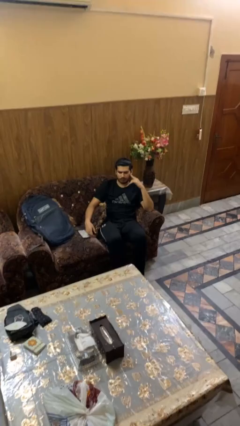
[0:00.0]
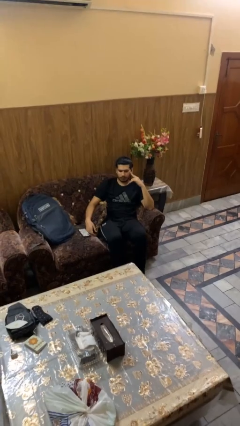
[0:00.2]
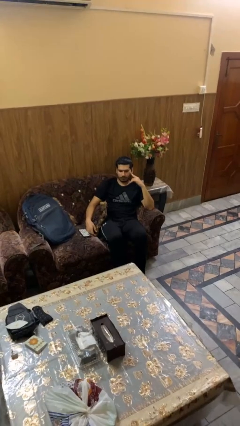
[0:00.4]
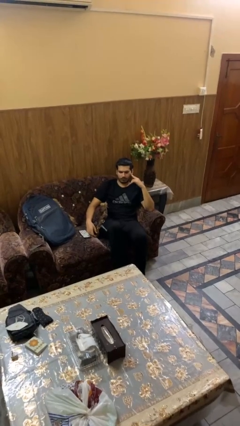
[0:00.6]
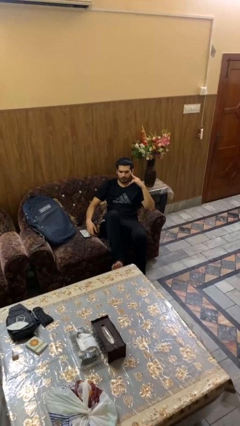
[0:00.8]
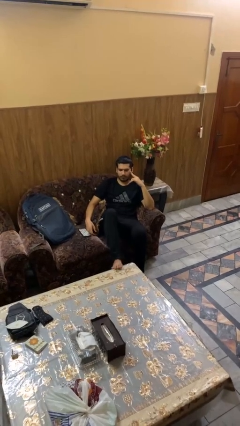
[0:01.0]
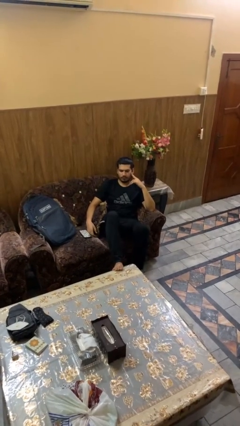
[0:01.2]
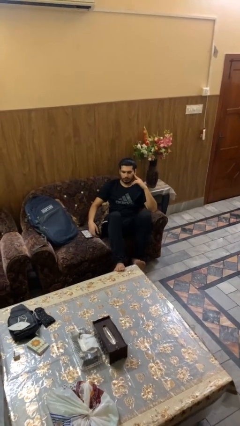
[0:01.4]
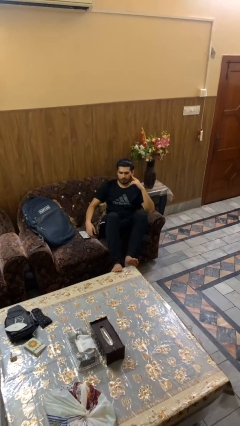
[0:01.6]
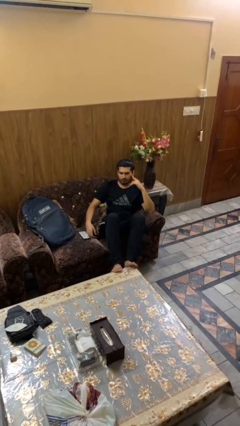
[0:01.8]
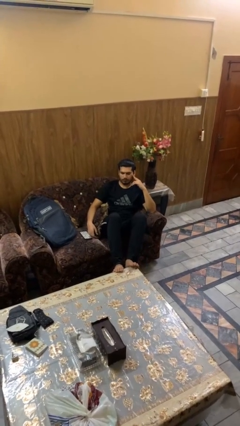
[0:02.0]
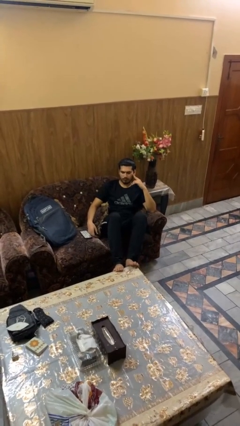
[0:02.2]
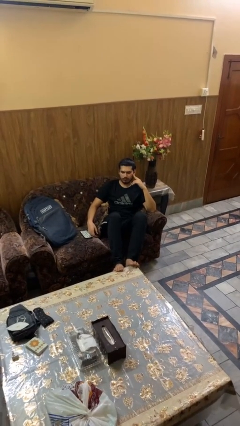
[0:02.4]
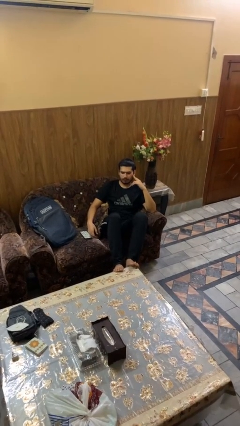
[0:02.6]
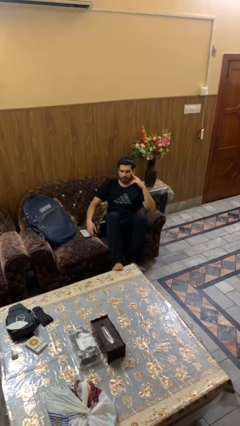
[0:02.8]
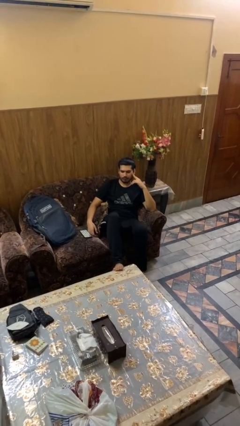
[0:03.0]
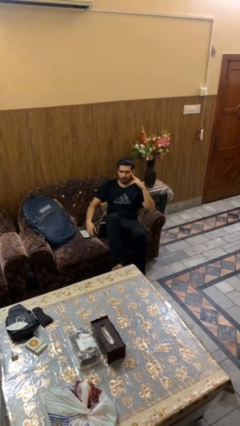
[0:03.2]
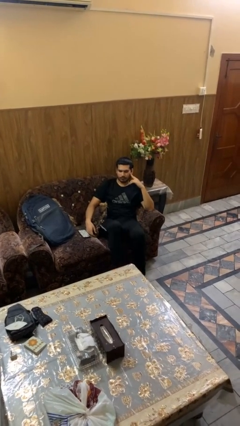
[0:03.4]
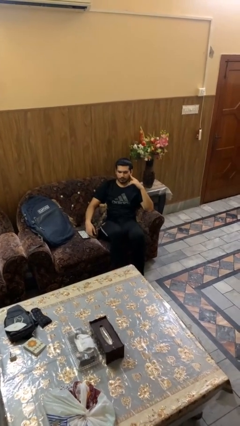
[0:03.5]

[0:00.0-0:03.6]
person puts feet up

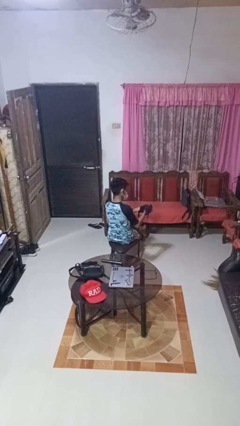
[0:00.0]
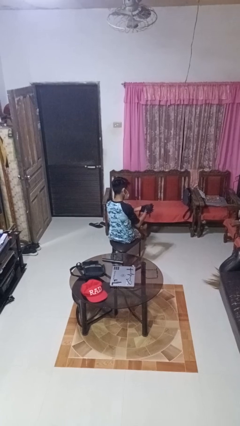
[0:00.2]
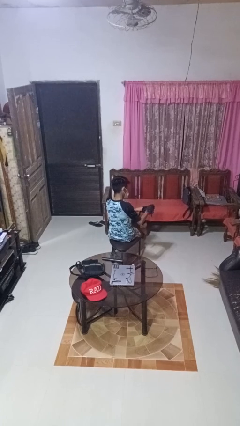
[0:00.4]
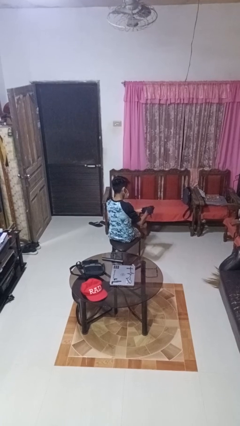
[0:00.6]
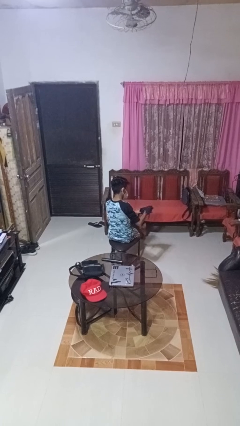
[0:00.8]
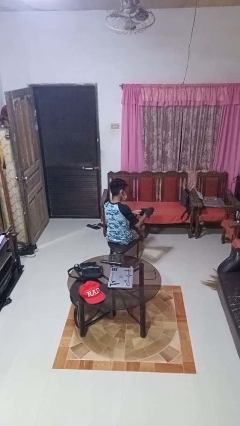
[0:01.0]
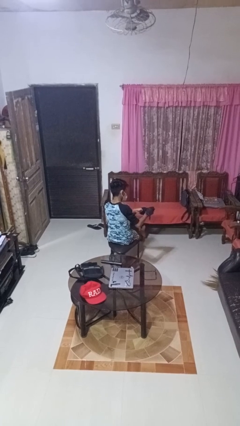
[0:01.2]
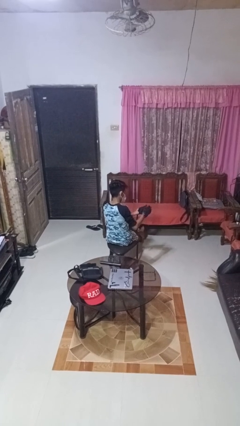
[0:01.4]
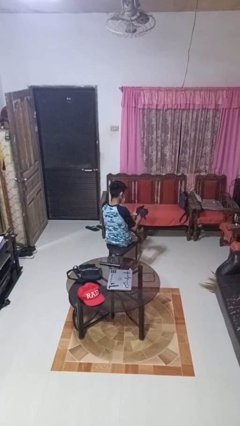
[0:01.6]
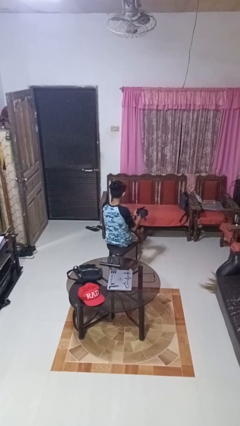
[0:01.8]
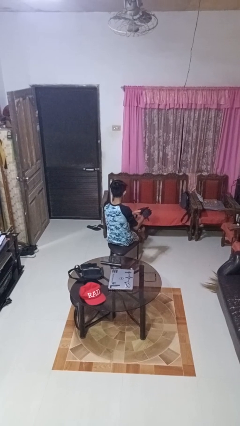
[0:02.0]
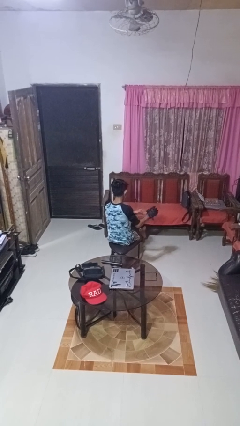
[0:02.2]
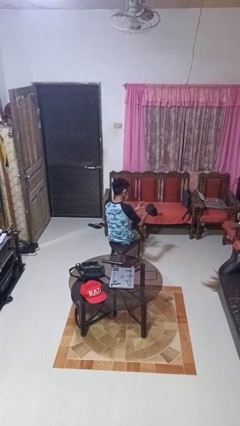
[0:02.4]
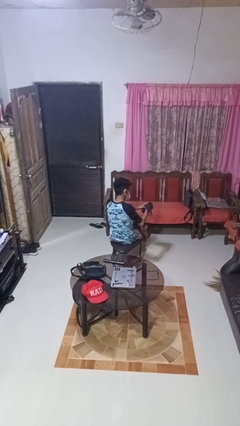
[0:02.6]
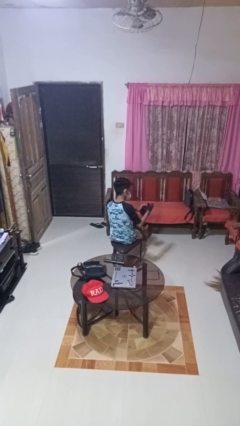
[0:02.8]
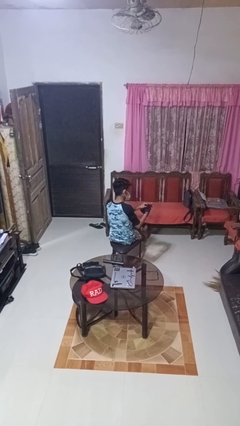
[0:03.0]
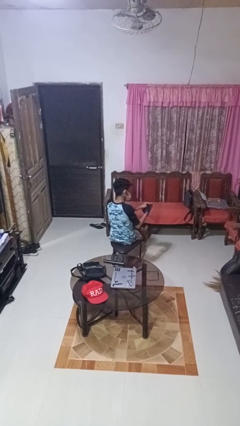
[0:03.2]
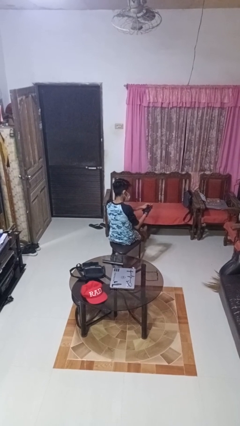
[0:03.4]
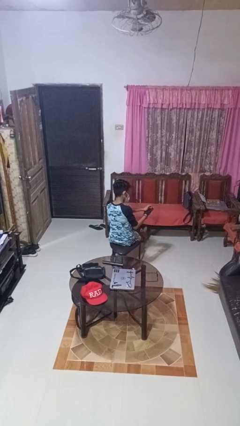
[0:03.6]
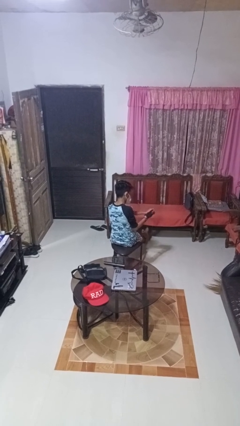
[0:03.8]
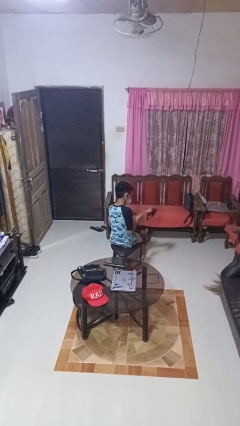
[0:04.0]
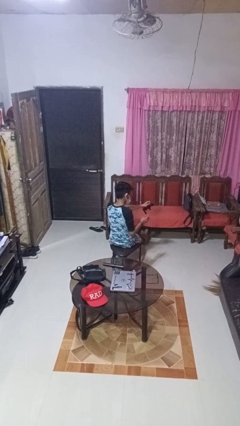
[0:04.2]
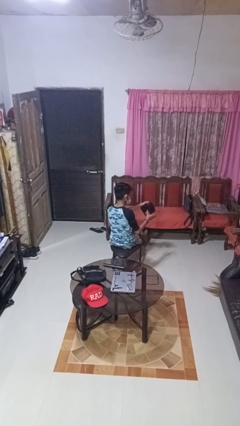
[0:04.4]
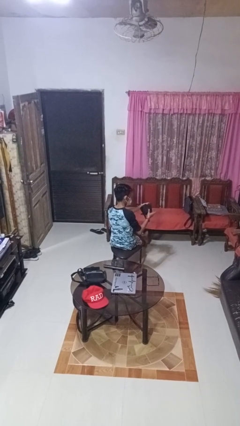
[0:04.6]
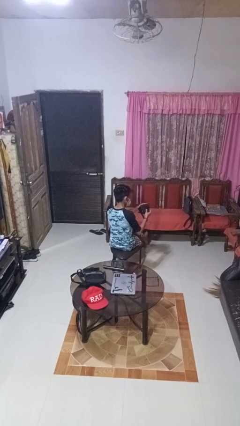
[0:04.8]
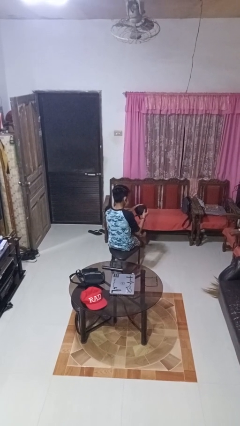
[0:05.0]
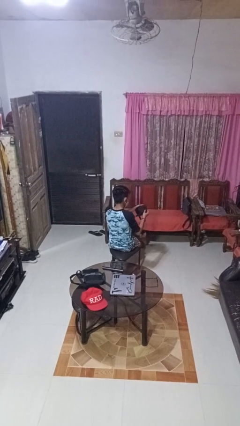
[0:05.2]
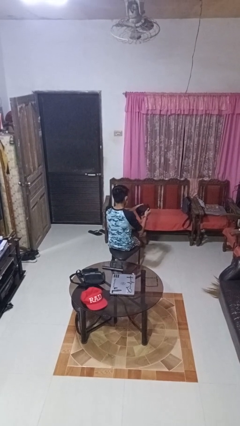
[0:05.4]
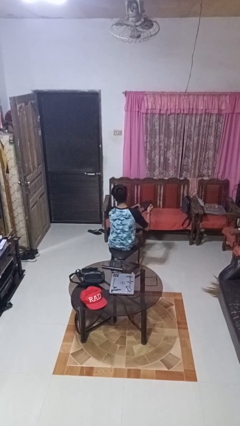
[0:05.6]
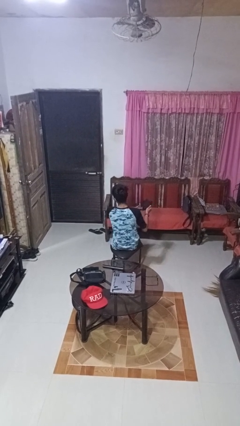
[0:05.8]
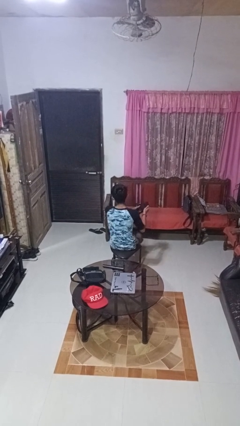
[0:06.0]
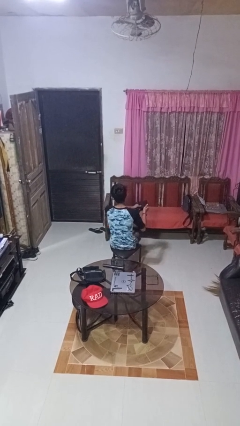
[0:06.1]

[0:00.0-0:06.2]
person takes off gloves

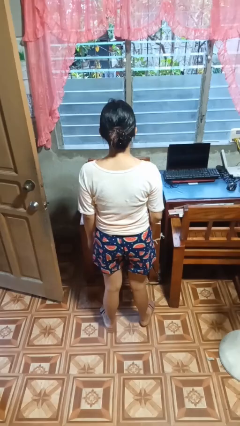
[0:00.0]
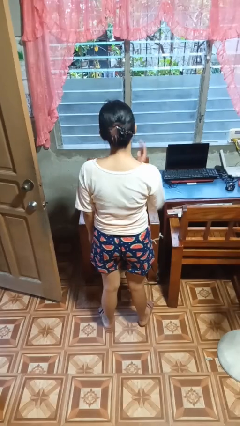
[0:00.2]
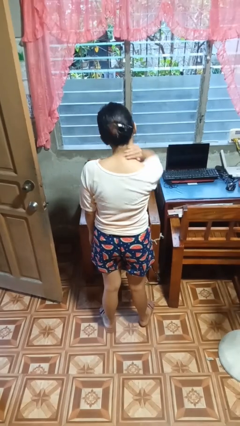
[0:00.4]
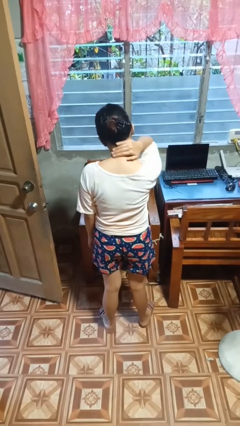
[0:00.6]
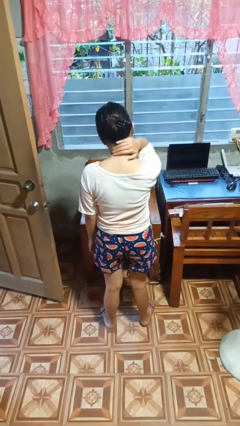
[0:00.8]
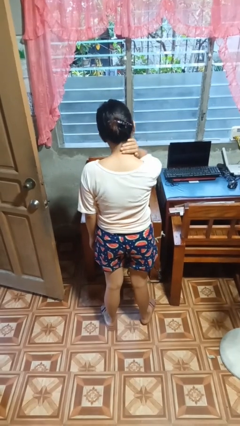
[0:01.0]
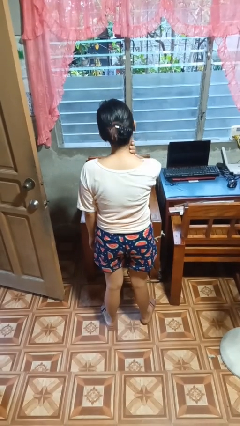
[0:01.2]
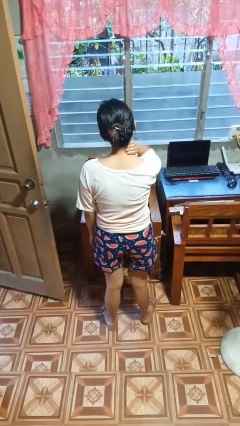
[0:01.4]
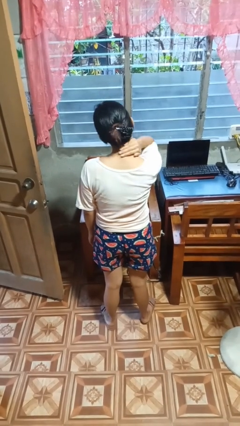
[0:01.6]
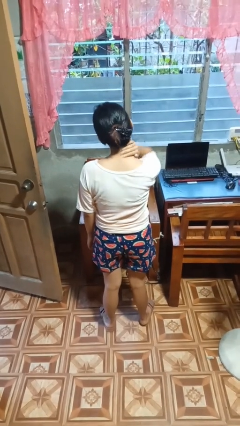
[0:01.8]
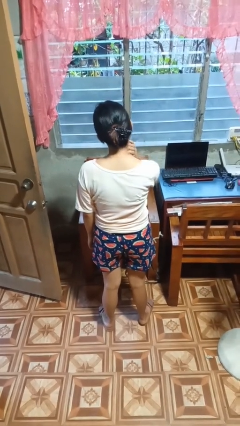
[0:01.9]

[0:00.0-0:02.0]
person rubs neck

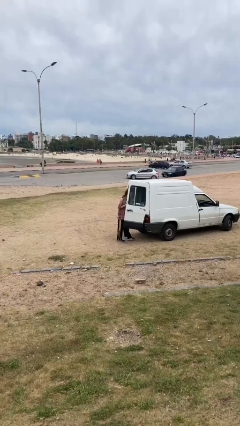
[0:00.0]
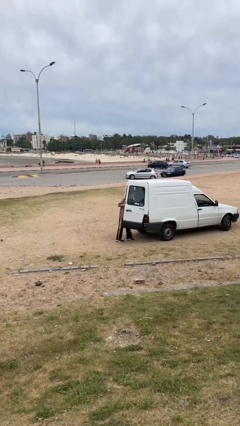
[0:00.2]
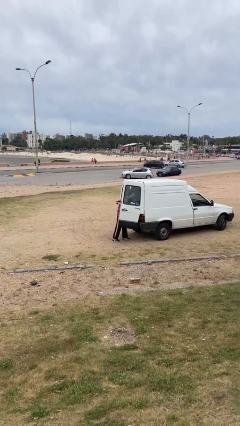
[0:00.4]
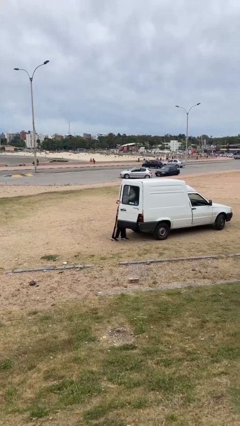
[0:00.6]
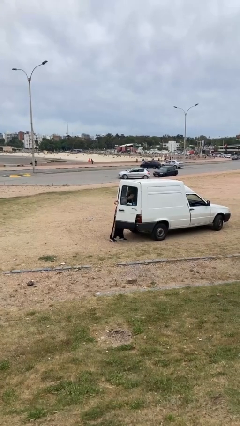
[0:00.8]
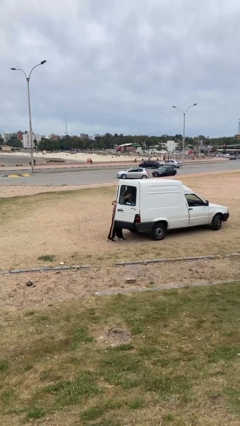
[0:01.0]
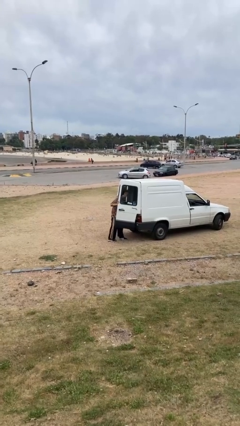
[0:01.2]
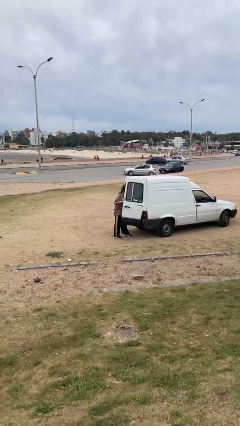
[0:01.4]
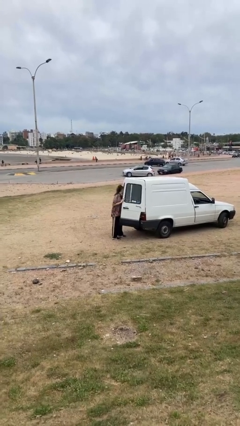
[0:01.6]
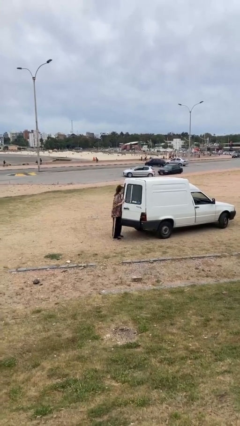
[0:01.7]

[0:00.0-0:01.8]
person loads car

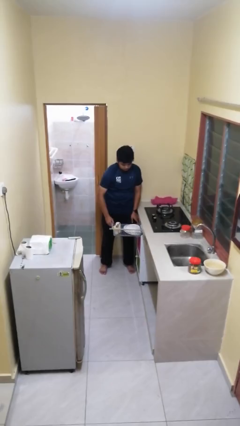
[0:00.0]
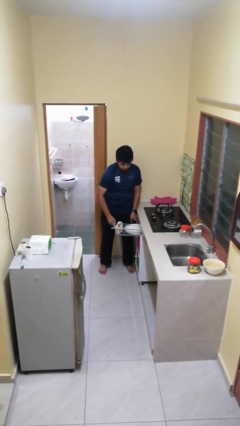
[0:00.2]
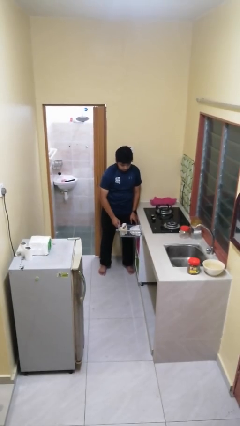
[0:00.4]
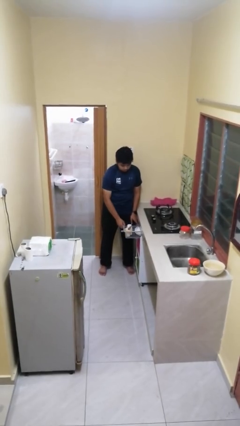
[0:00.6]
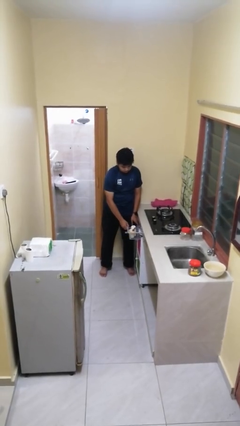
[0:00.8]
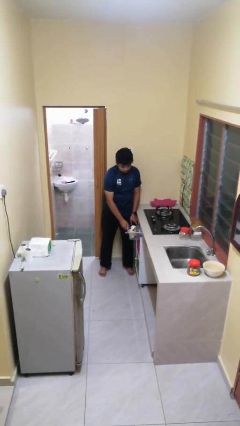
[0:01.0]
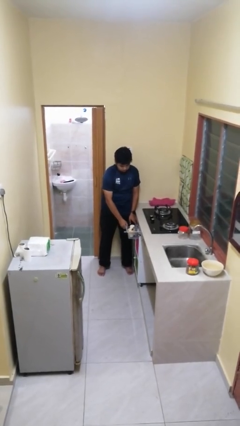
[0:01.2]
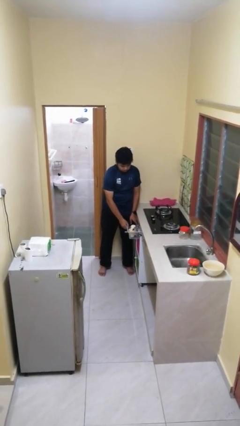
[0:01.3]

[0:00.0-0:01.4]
person closes kitchen drawer

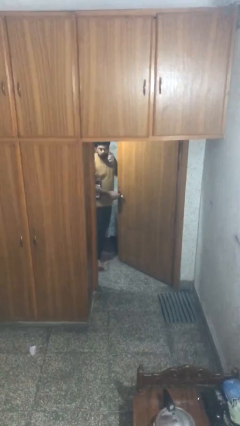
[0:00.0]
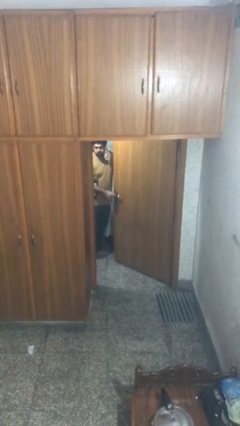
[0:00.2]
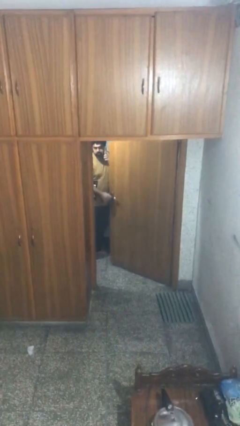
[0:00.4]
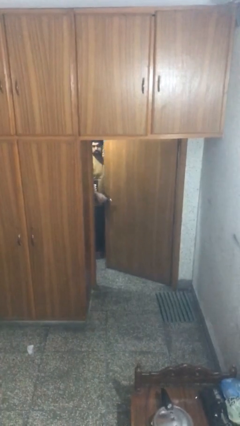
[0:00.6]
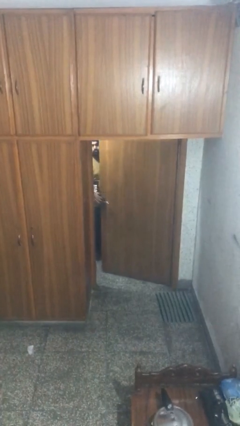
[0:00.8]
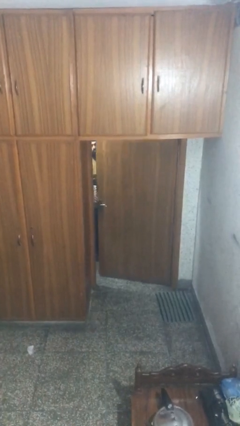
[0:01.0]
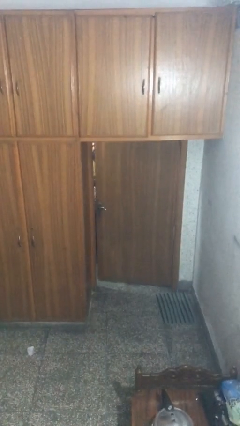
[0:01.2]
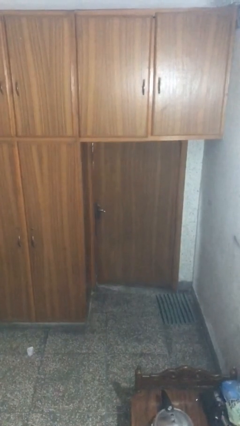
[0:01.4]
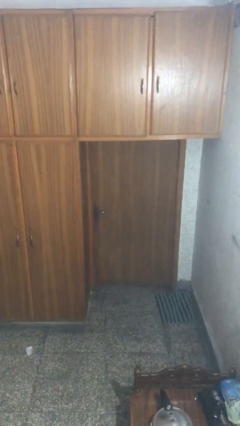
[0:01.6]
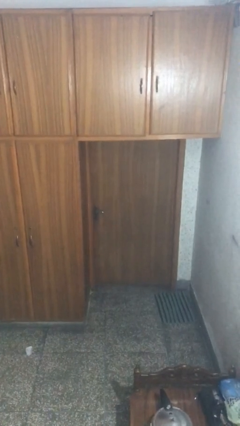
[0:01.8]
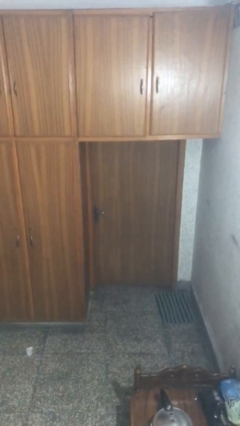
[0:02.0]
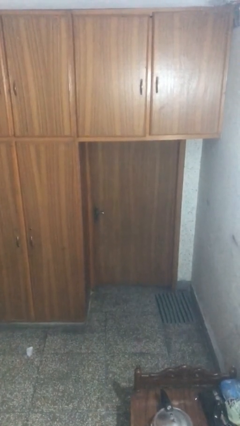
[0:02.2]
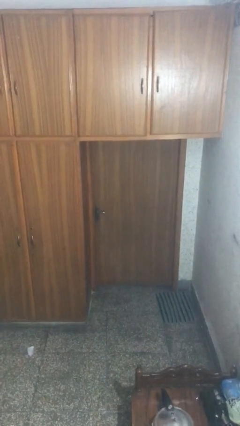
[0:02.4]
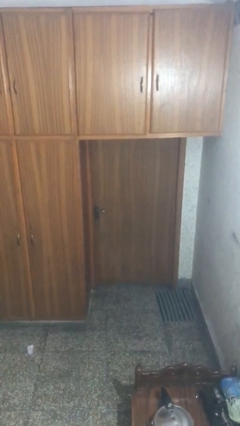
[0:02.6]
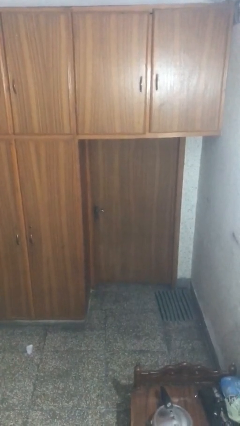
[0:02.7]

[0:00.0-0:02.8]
person closes facility door
